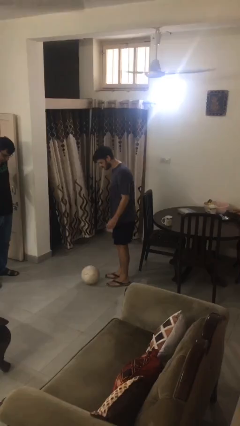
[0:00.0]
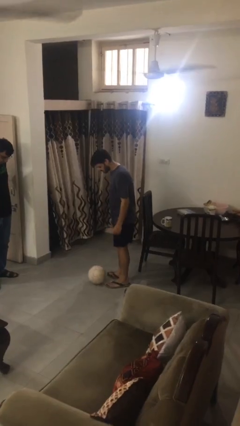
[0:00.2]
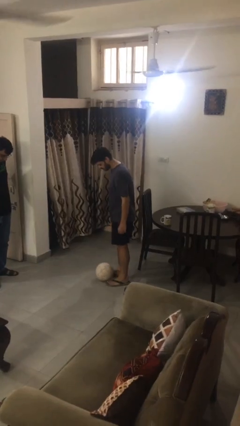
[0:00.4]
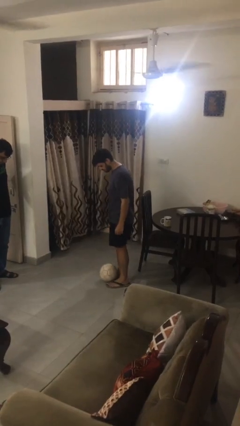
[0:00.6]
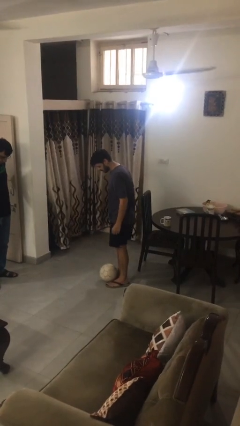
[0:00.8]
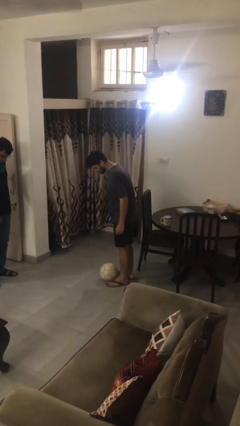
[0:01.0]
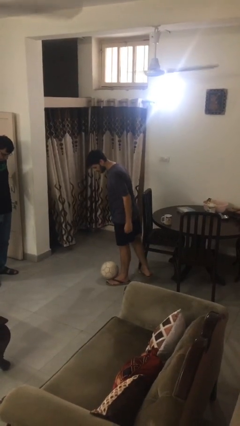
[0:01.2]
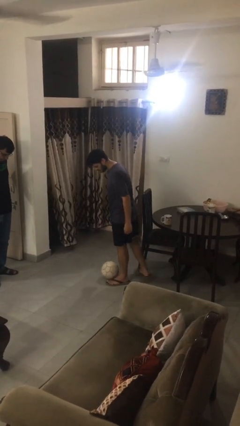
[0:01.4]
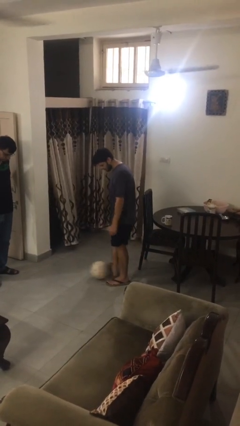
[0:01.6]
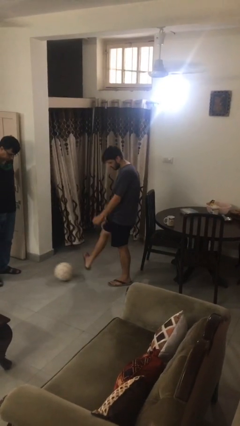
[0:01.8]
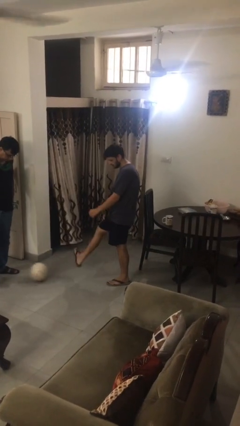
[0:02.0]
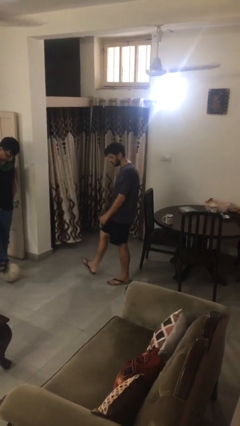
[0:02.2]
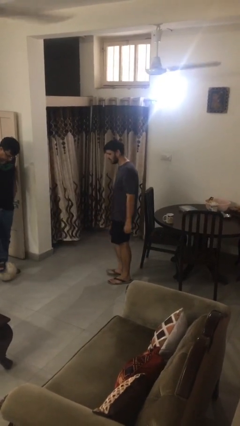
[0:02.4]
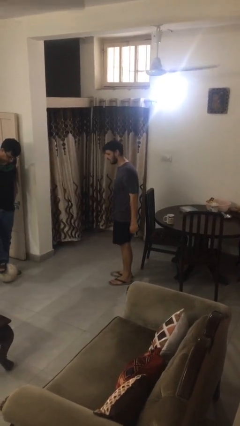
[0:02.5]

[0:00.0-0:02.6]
person kicks object to person

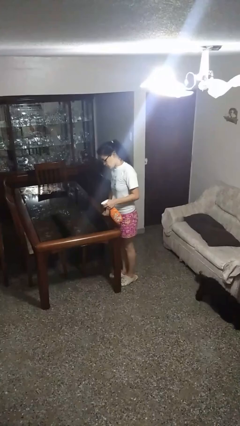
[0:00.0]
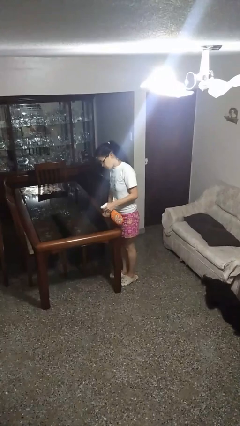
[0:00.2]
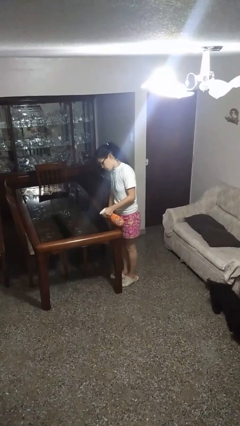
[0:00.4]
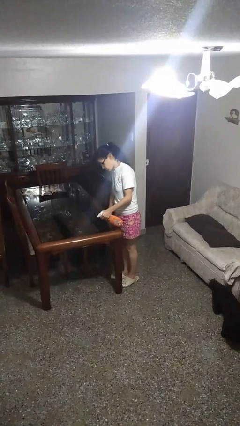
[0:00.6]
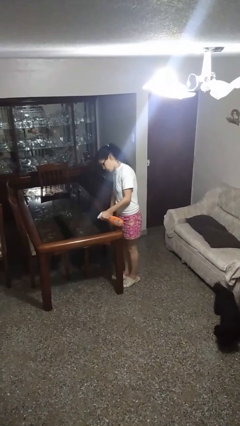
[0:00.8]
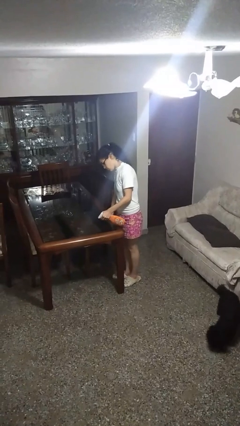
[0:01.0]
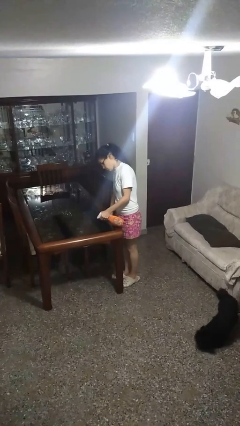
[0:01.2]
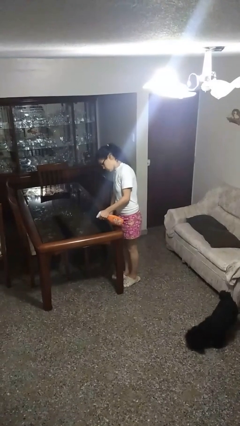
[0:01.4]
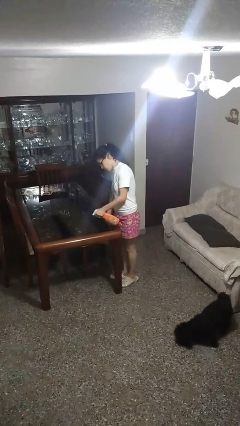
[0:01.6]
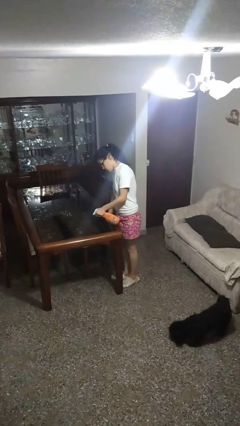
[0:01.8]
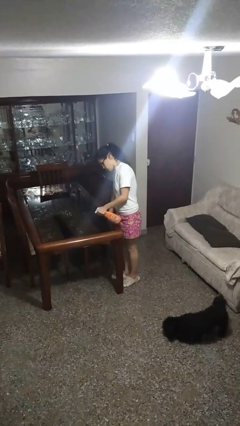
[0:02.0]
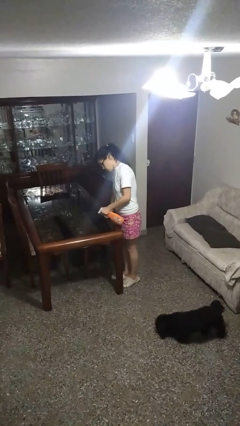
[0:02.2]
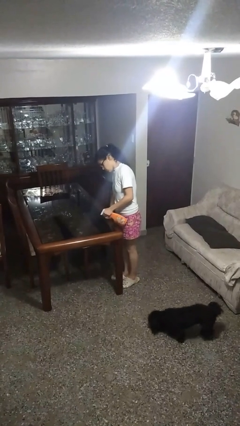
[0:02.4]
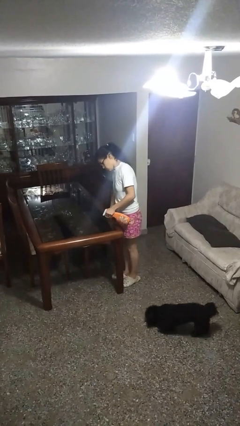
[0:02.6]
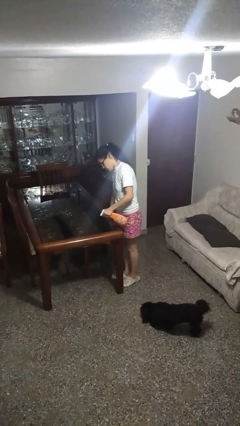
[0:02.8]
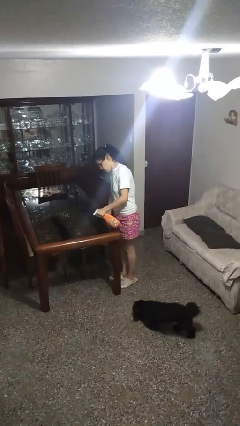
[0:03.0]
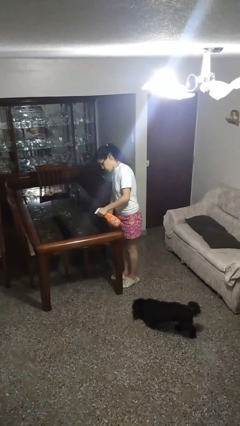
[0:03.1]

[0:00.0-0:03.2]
person sprays from bottle

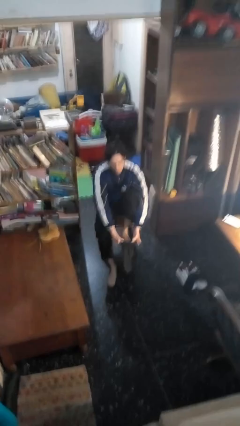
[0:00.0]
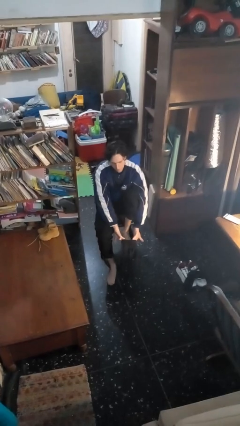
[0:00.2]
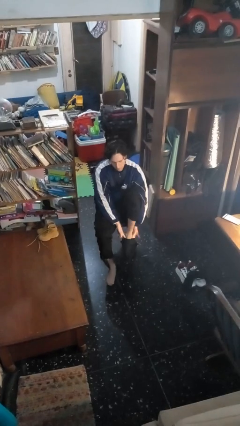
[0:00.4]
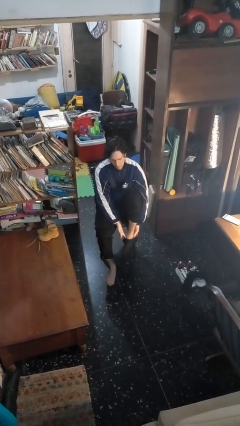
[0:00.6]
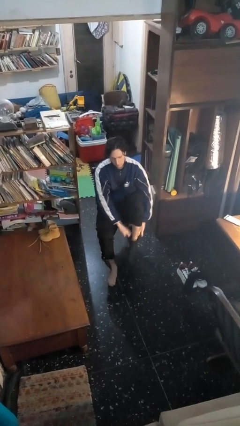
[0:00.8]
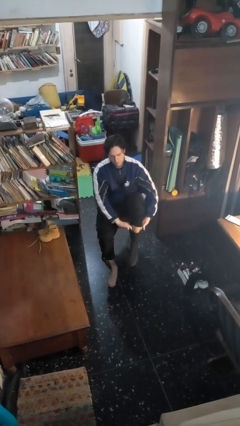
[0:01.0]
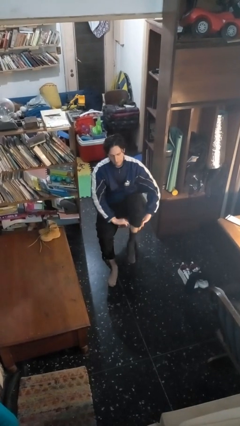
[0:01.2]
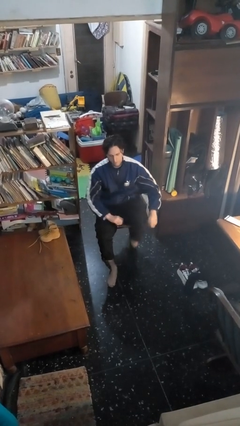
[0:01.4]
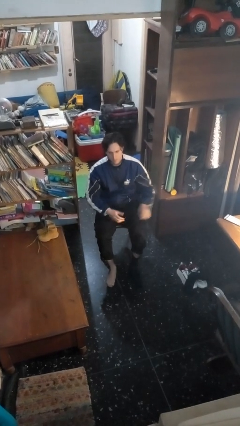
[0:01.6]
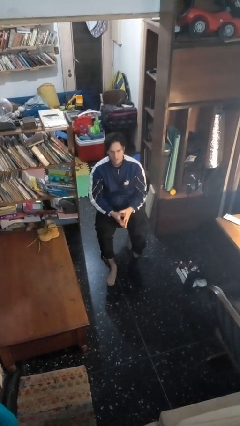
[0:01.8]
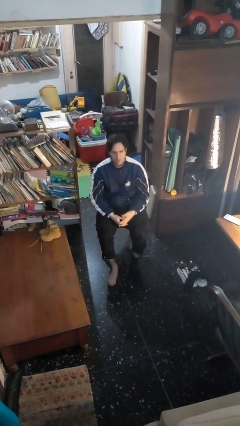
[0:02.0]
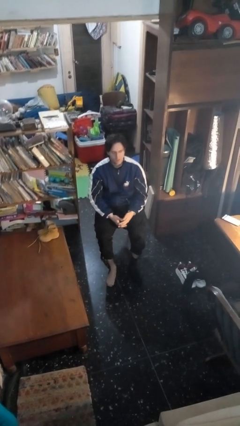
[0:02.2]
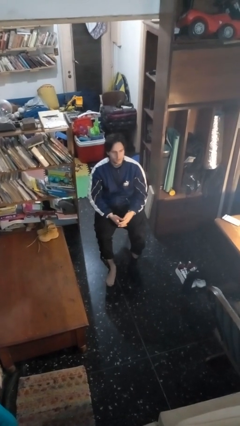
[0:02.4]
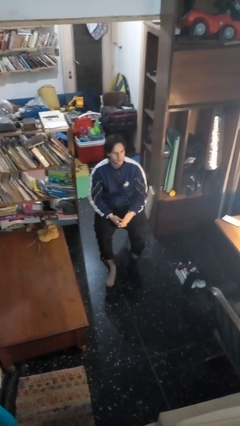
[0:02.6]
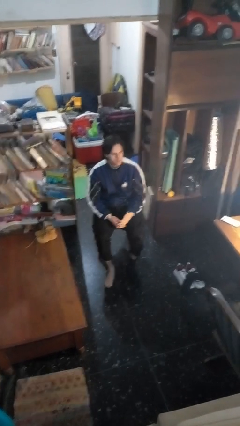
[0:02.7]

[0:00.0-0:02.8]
person puts on socks

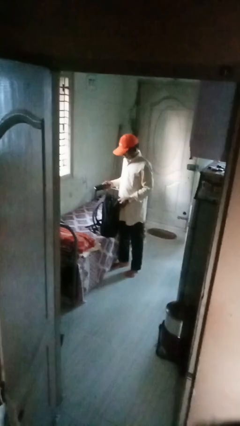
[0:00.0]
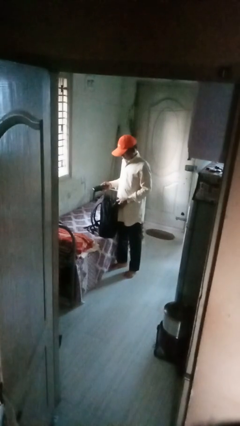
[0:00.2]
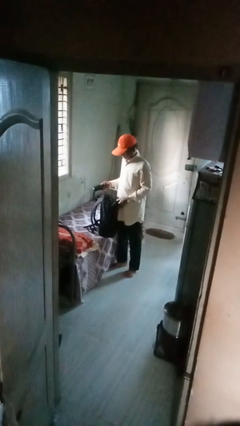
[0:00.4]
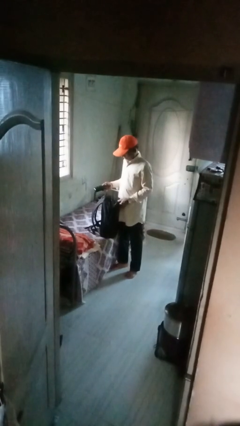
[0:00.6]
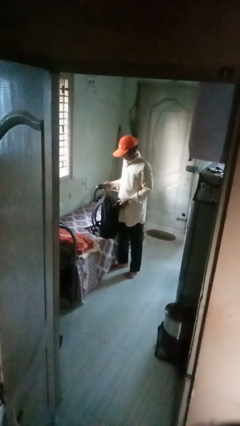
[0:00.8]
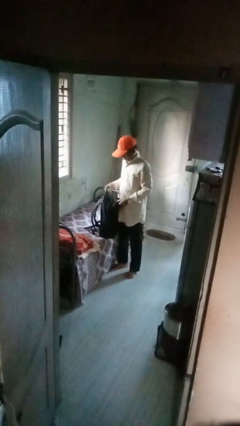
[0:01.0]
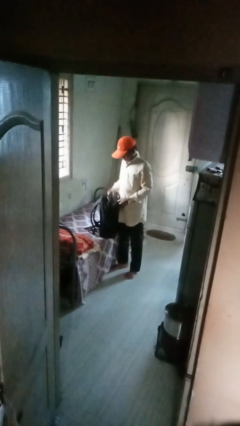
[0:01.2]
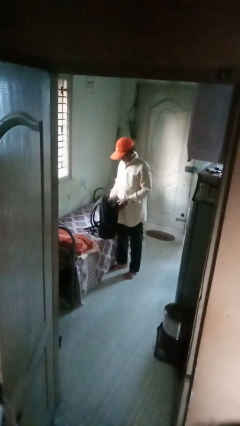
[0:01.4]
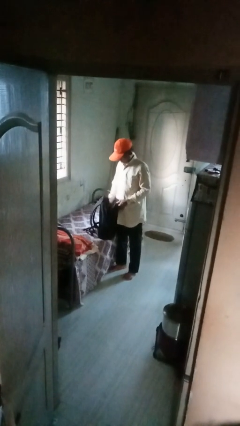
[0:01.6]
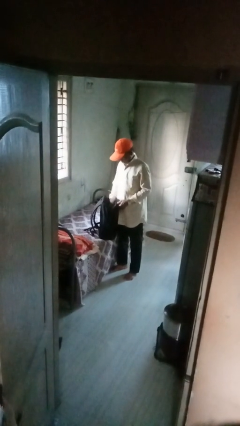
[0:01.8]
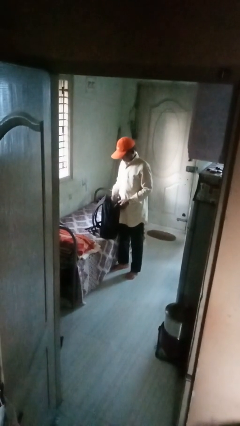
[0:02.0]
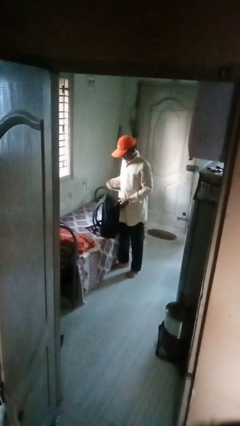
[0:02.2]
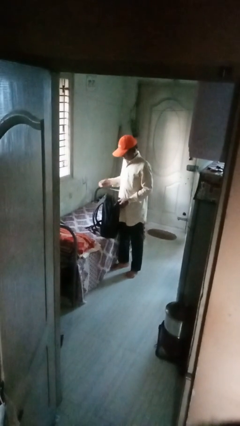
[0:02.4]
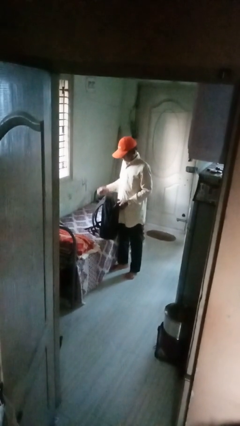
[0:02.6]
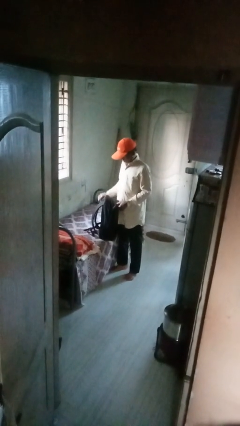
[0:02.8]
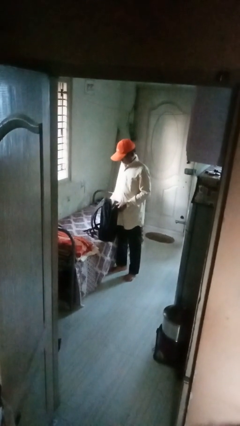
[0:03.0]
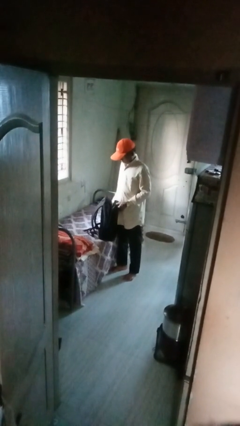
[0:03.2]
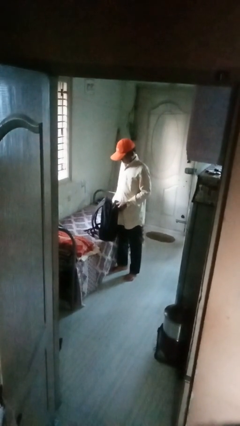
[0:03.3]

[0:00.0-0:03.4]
person puts object into backpack

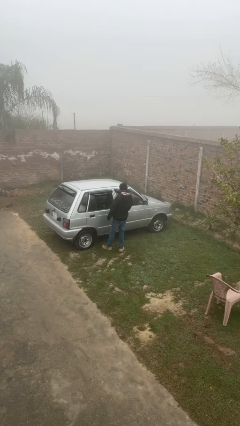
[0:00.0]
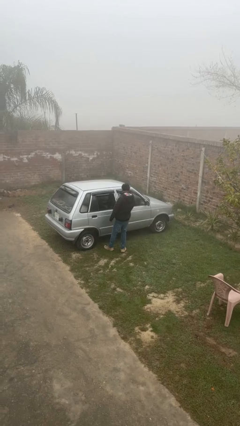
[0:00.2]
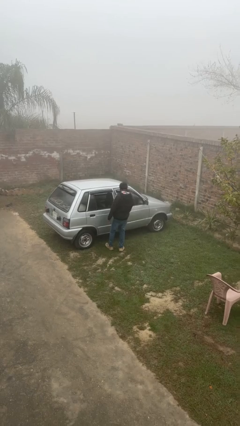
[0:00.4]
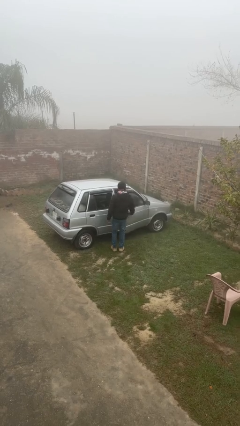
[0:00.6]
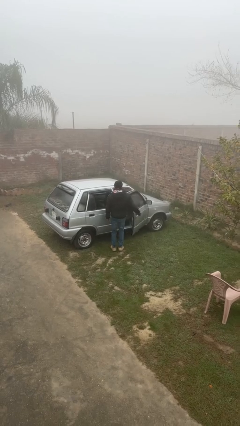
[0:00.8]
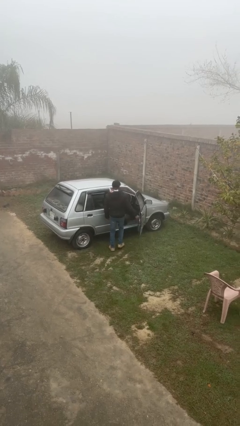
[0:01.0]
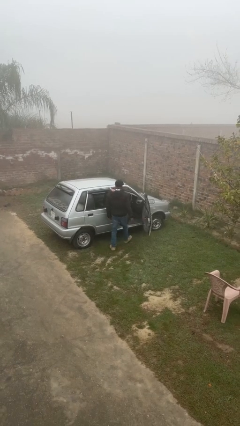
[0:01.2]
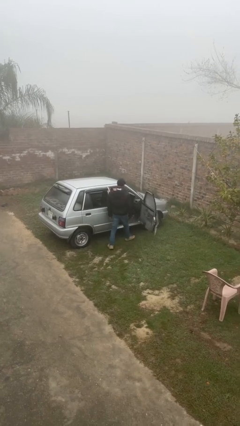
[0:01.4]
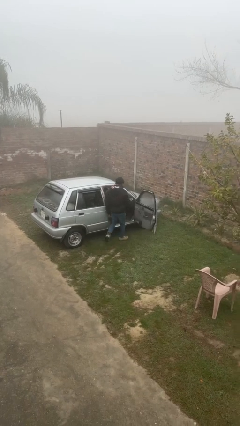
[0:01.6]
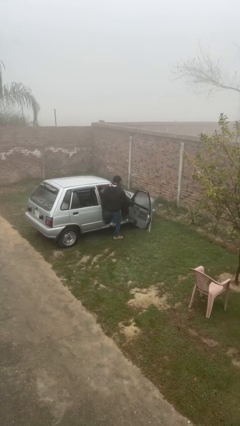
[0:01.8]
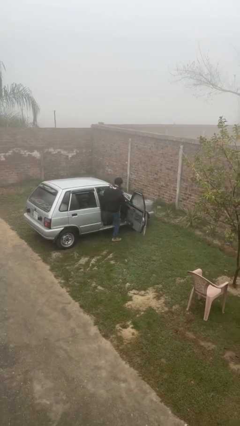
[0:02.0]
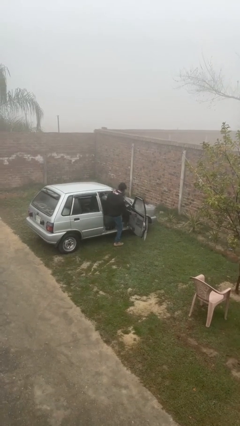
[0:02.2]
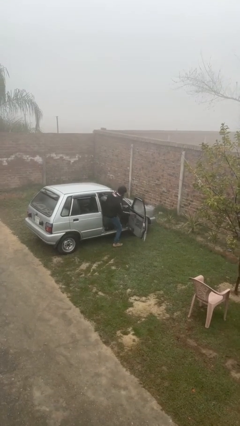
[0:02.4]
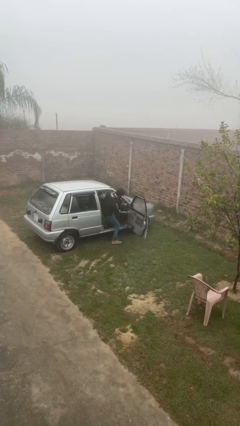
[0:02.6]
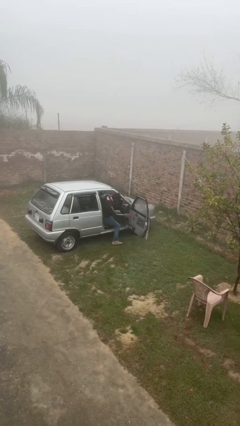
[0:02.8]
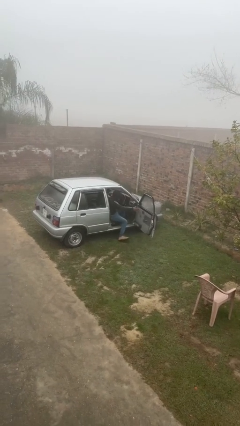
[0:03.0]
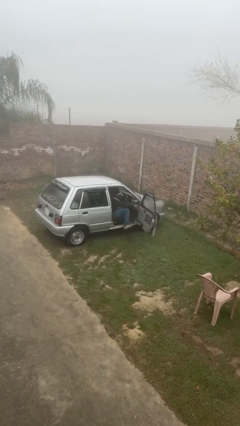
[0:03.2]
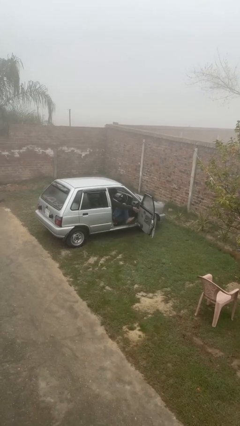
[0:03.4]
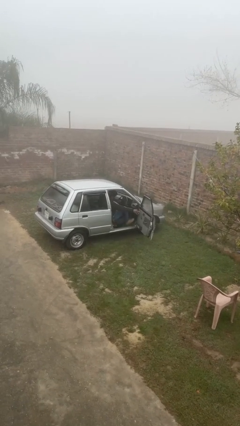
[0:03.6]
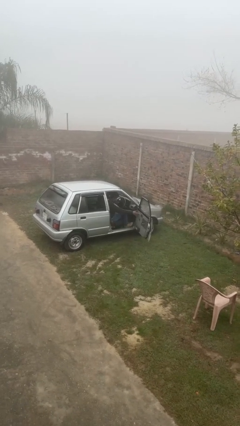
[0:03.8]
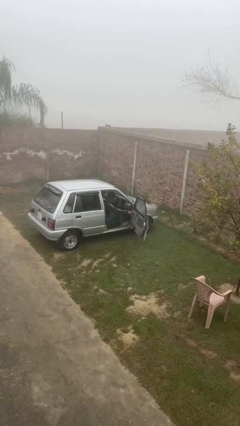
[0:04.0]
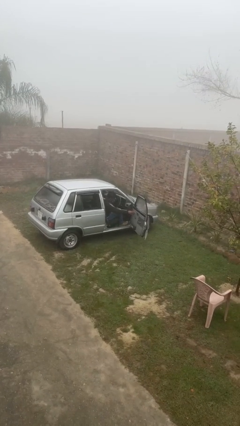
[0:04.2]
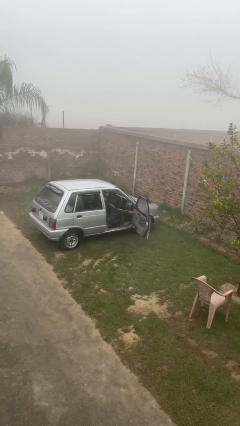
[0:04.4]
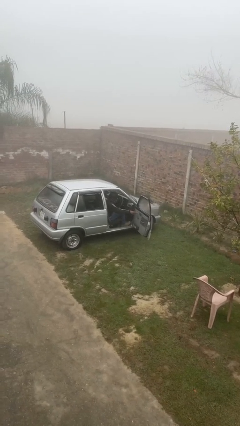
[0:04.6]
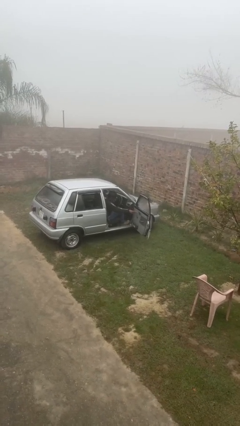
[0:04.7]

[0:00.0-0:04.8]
person enters car

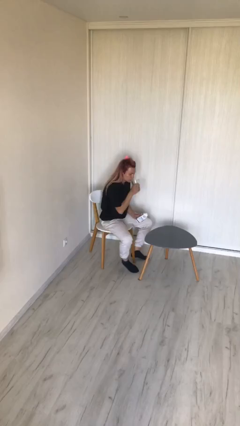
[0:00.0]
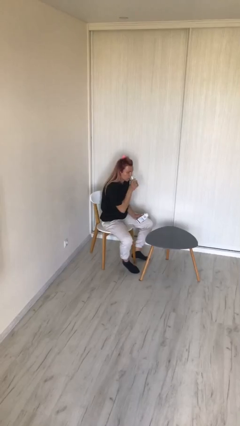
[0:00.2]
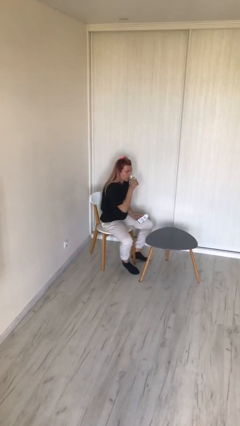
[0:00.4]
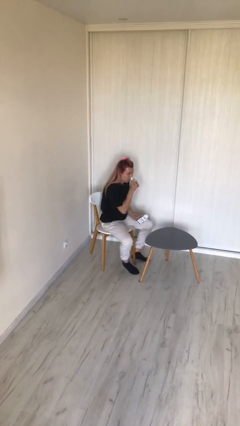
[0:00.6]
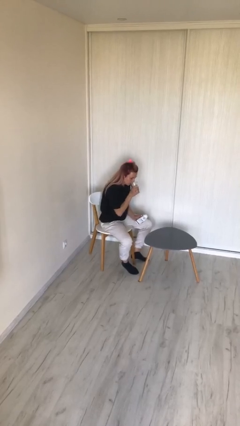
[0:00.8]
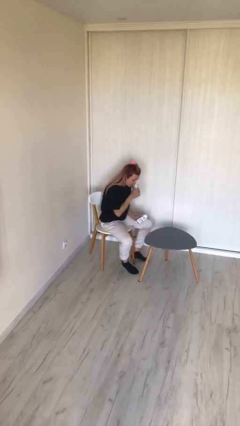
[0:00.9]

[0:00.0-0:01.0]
person drinks from cup
